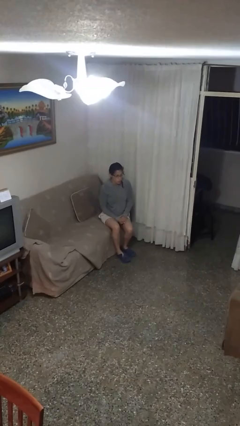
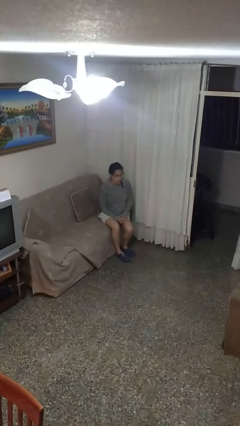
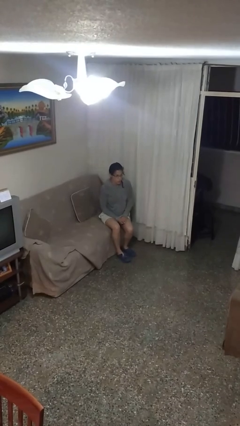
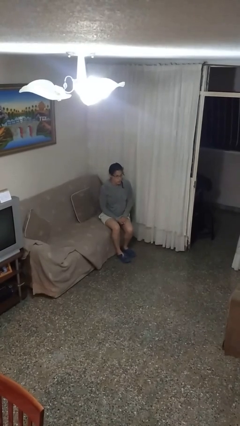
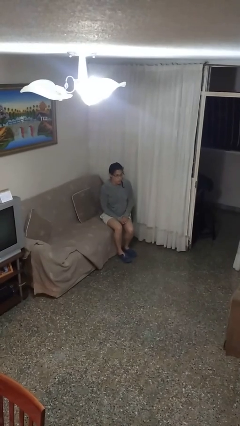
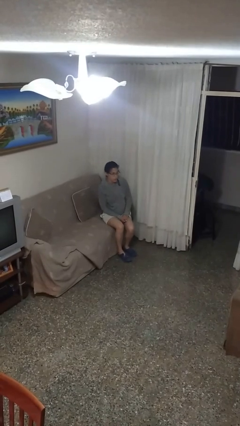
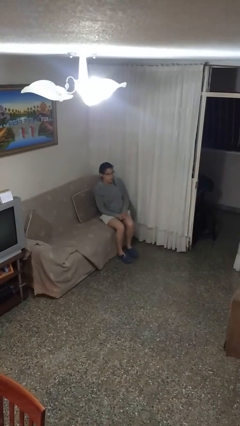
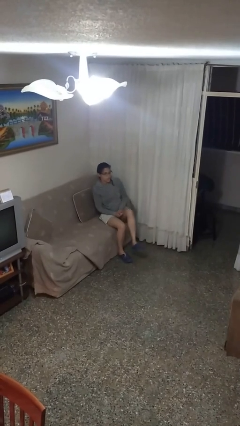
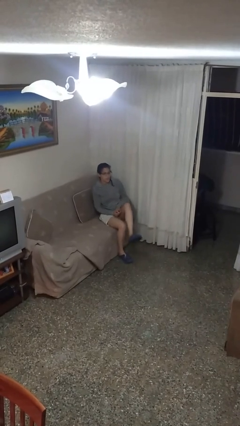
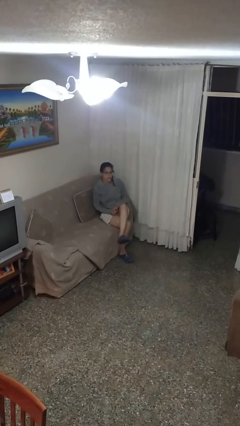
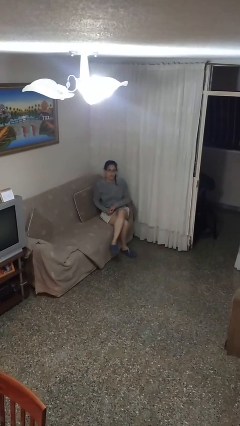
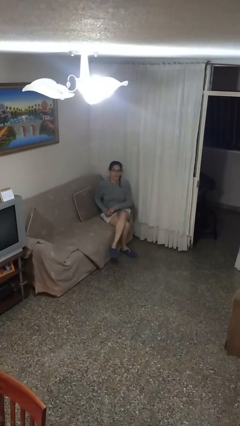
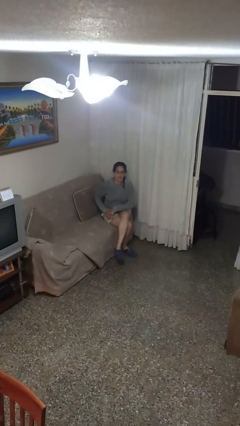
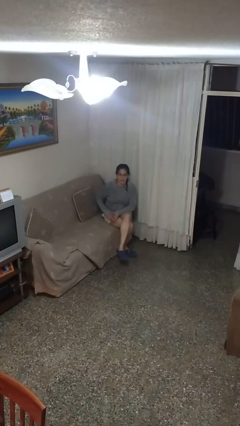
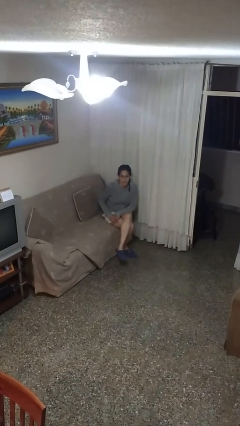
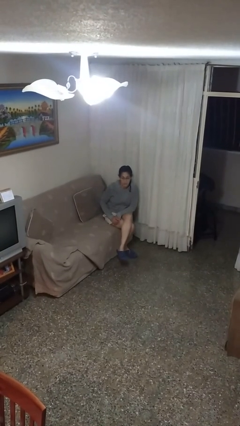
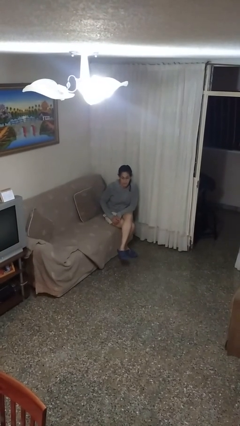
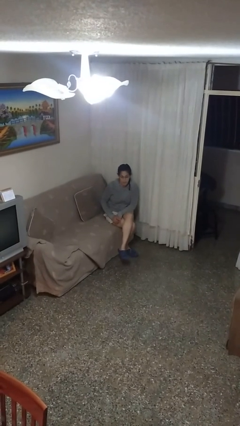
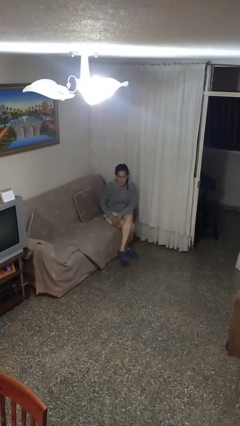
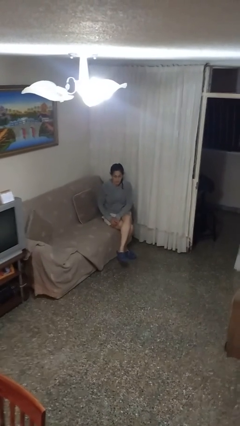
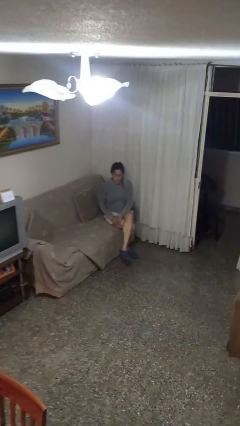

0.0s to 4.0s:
person crosses legs

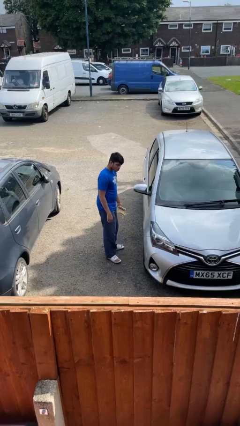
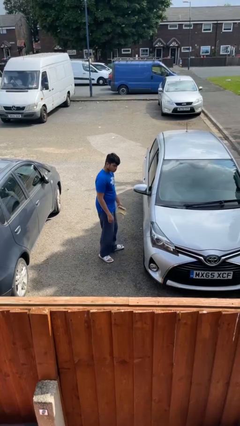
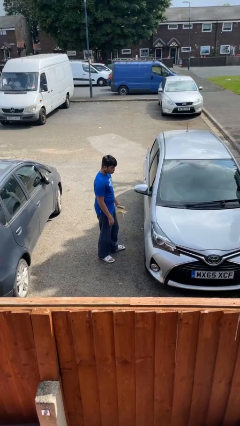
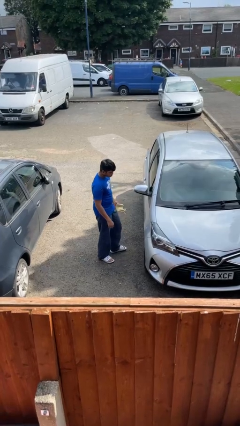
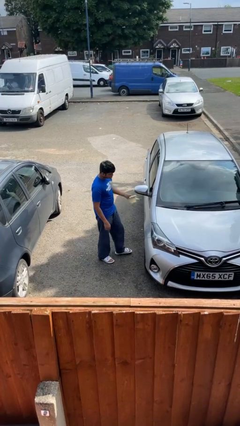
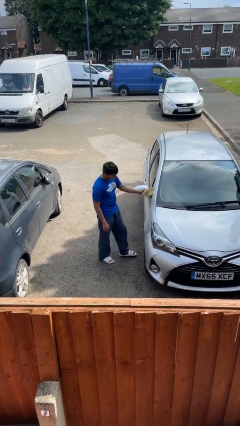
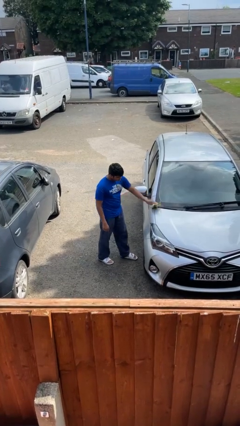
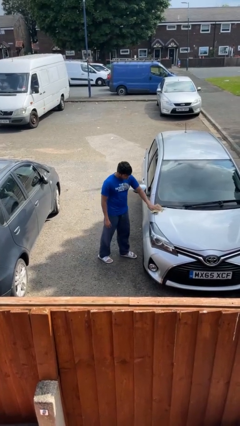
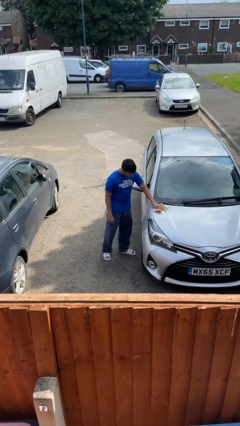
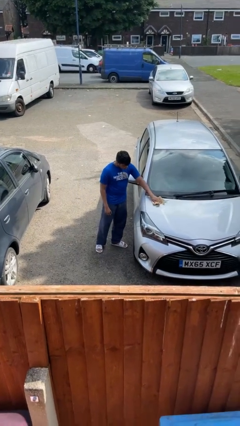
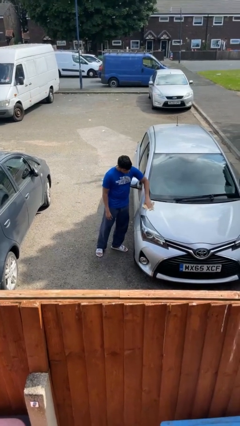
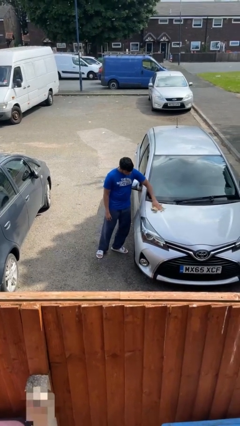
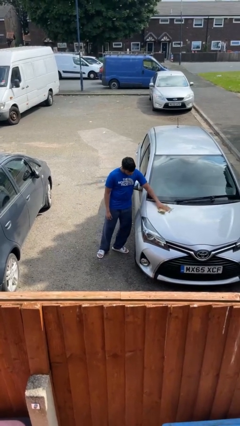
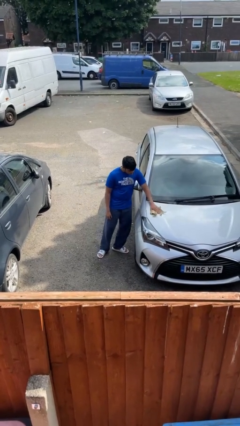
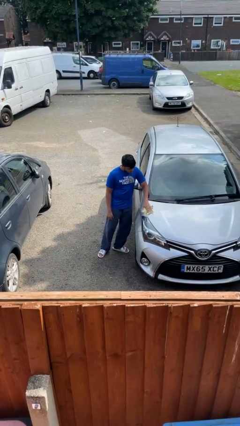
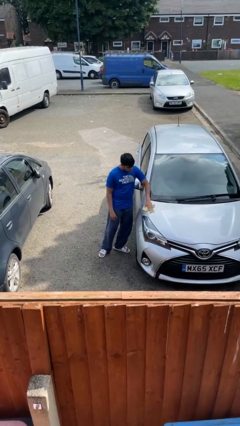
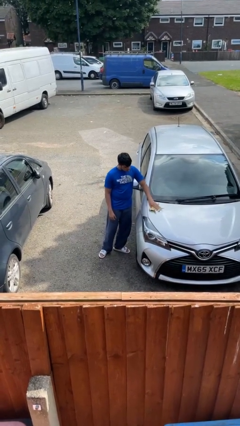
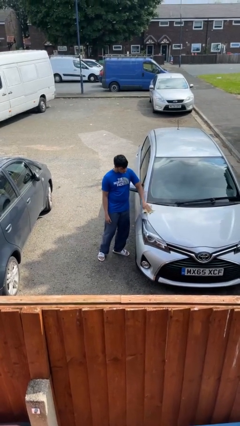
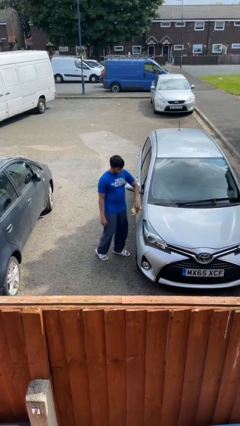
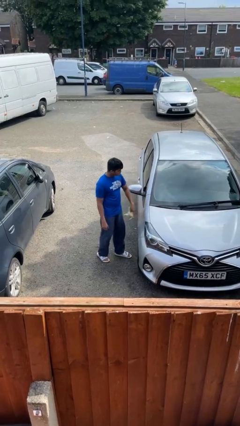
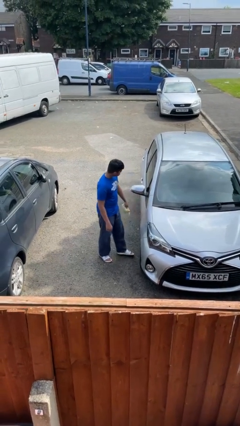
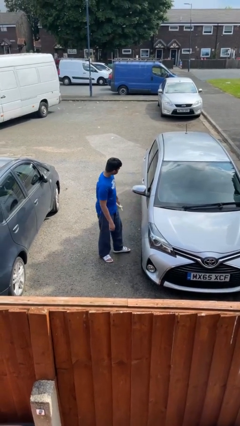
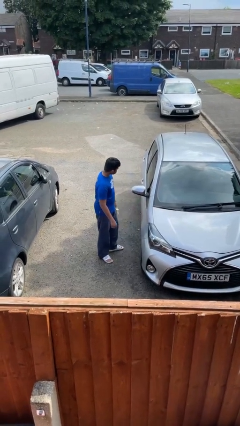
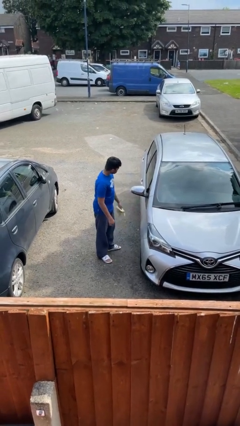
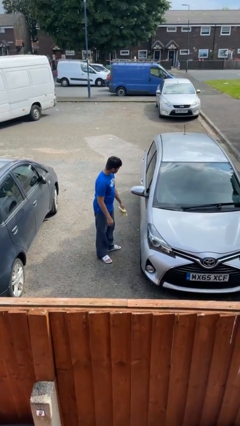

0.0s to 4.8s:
person polishes car with rag

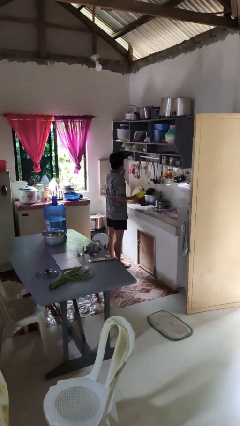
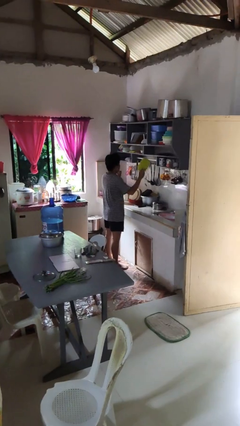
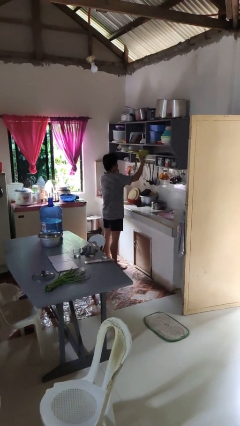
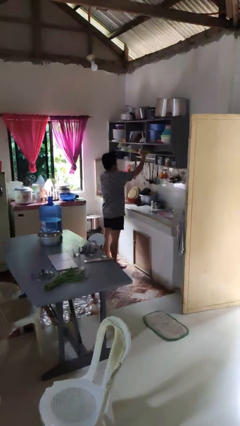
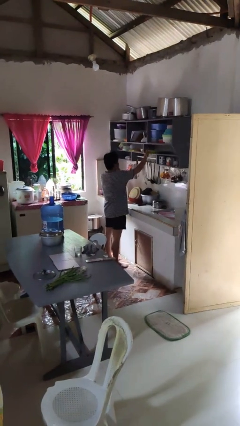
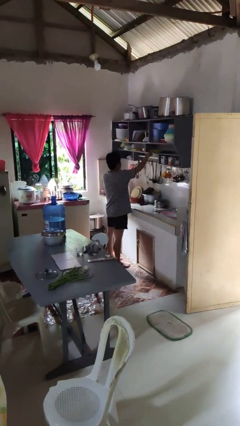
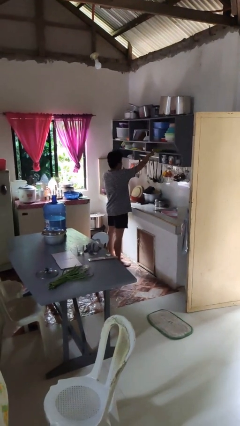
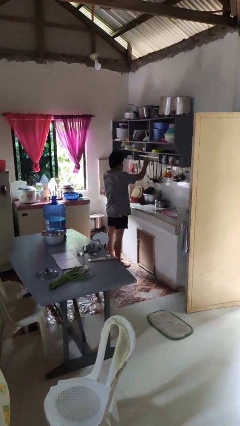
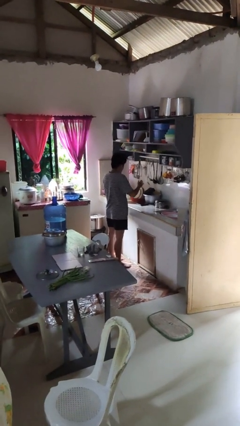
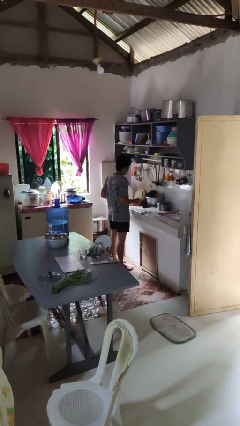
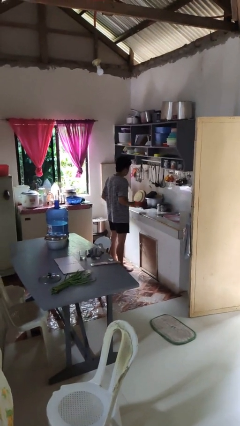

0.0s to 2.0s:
person puts object in cabinet

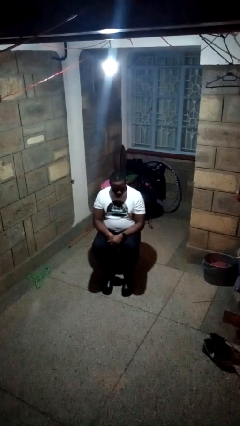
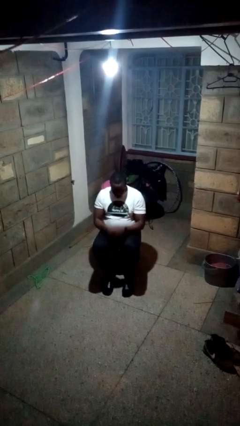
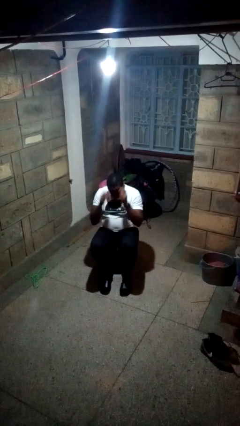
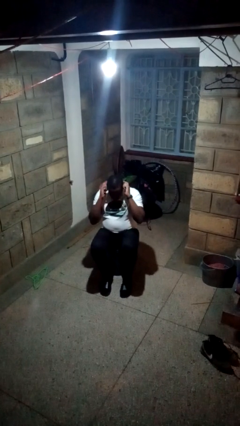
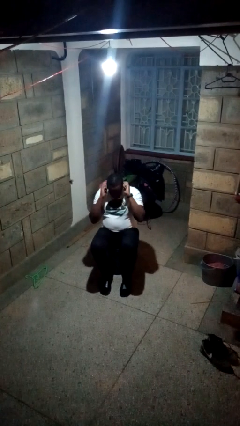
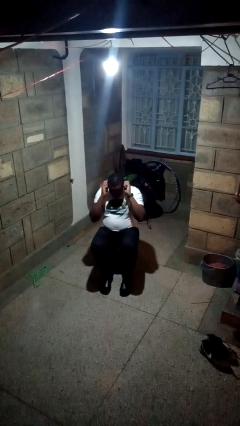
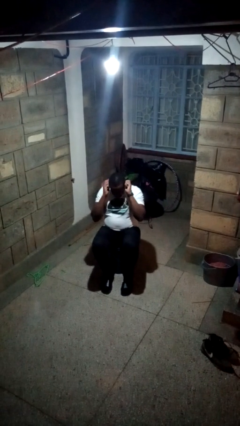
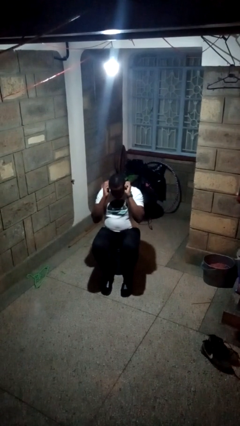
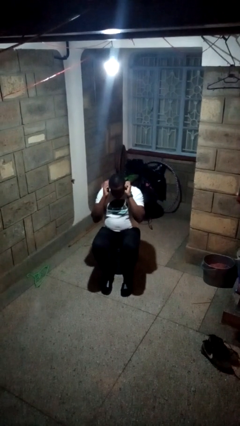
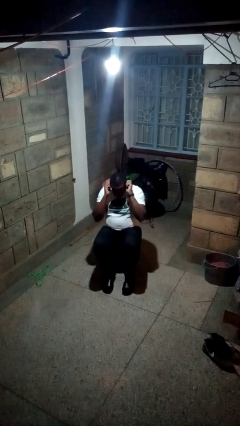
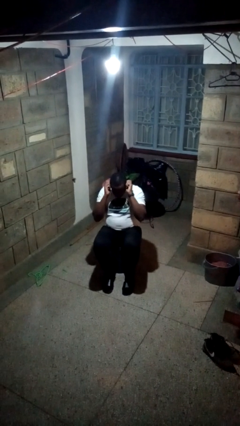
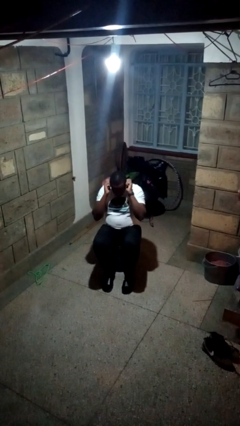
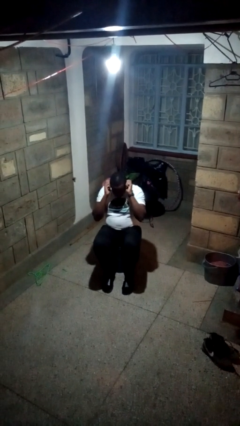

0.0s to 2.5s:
person touches earlobe

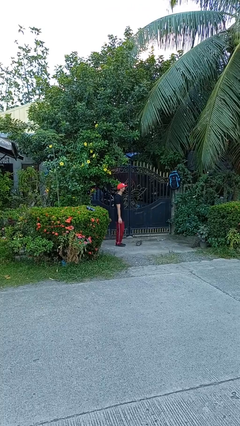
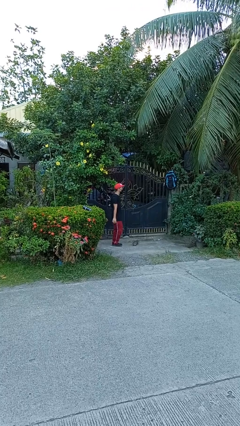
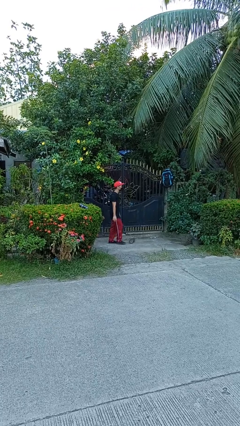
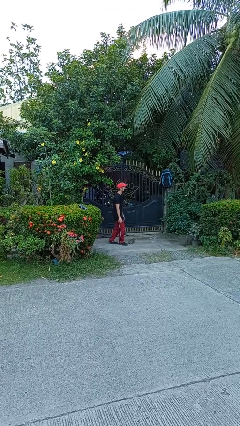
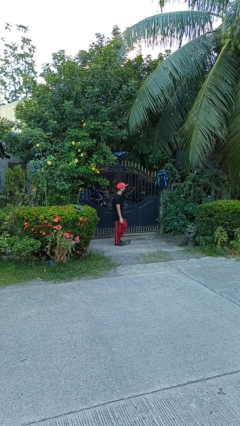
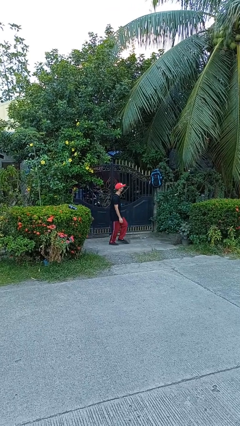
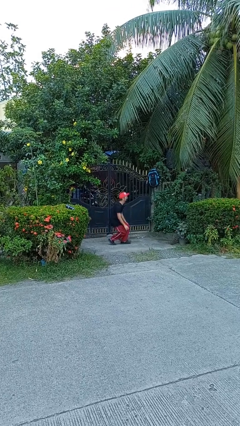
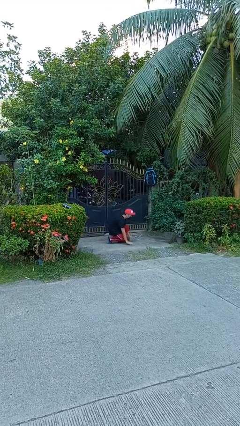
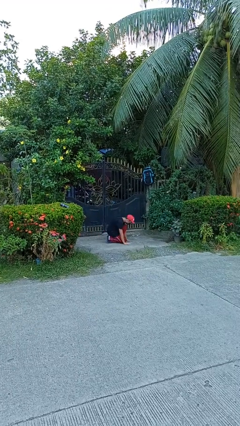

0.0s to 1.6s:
person trips on object on floor

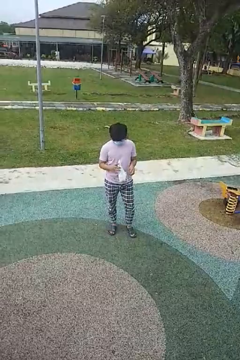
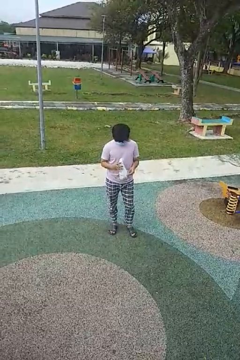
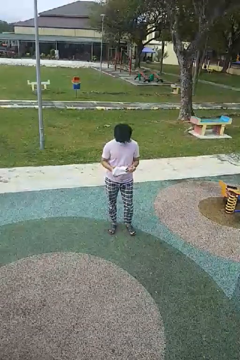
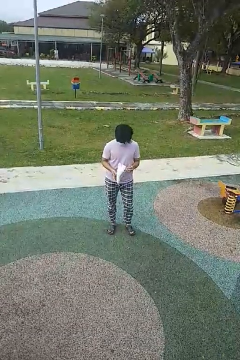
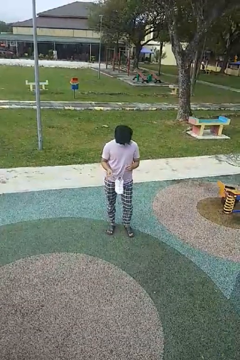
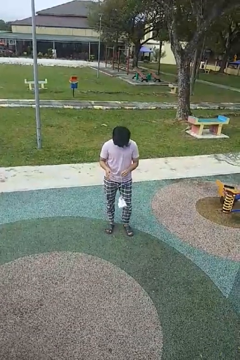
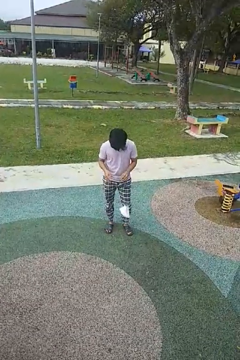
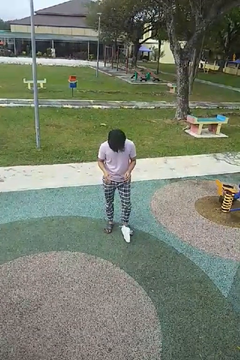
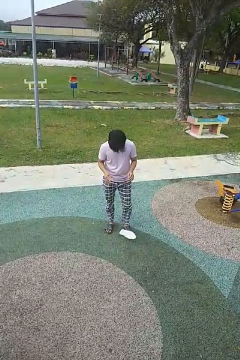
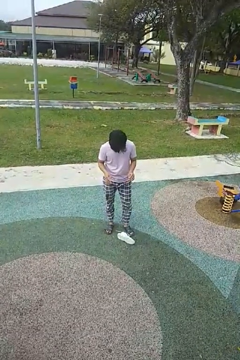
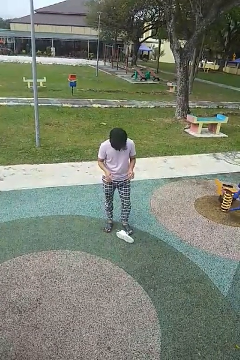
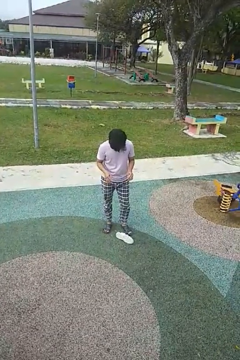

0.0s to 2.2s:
person drops object

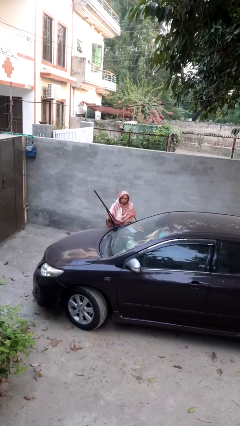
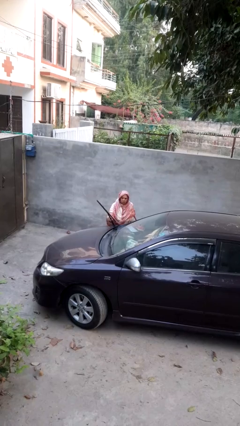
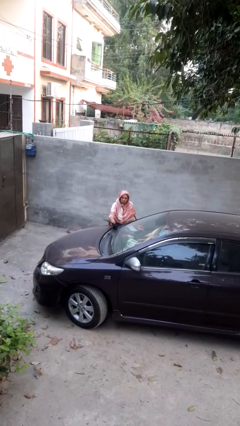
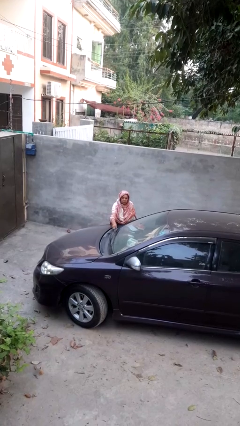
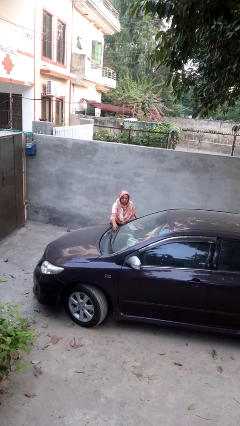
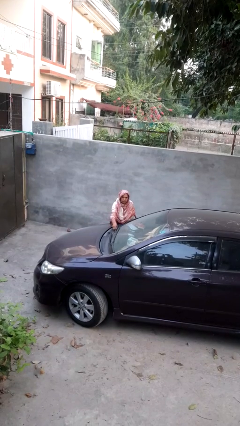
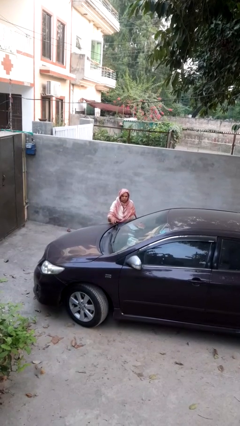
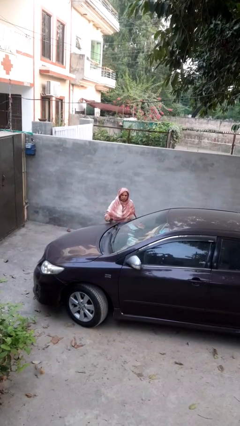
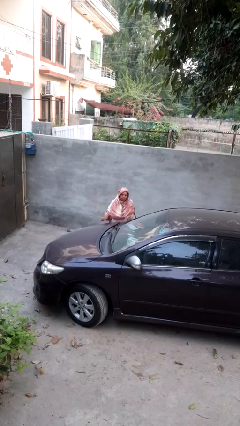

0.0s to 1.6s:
person flips down car wipers
